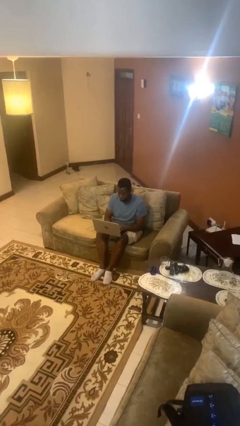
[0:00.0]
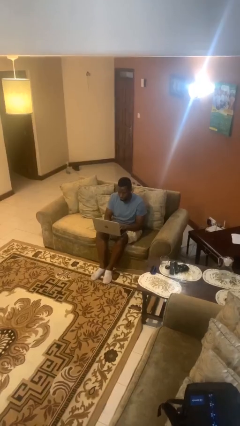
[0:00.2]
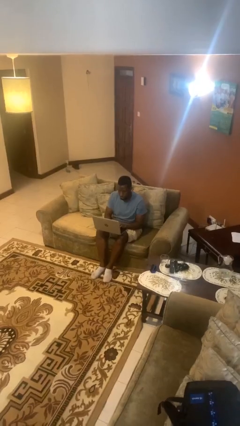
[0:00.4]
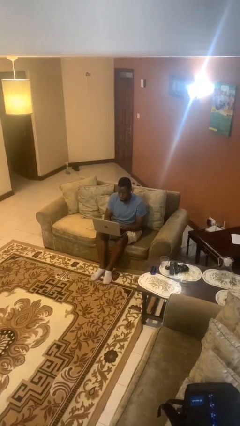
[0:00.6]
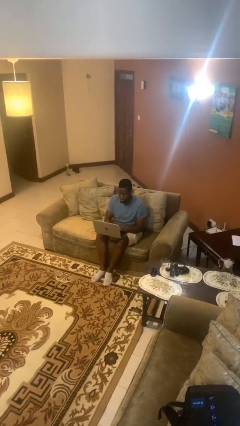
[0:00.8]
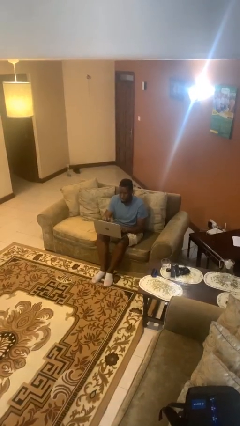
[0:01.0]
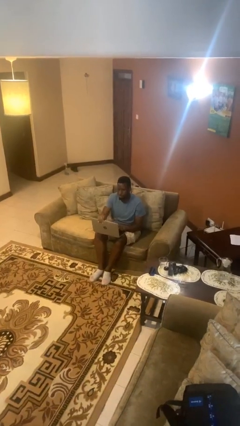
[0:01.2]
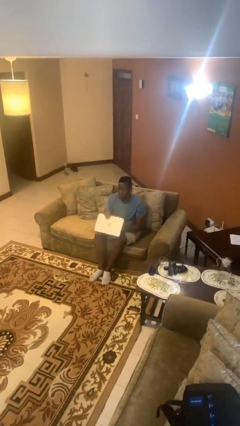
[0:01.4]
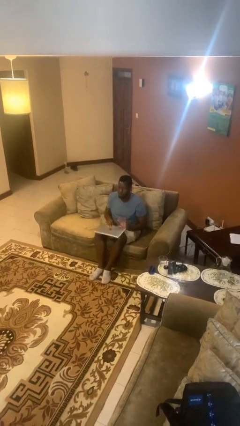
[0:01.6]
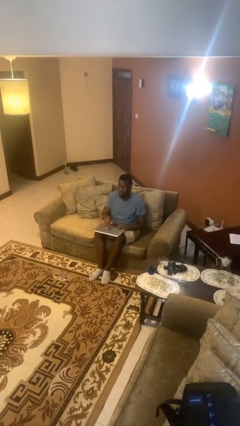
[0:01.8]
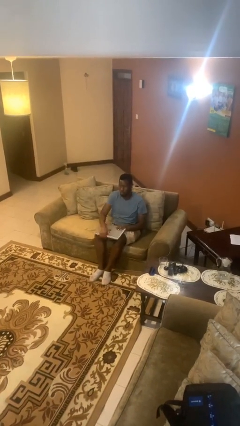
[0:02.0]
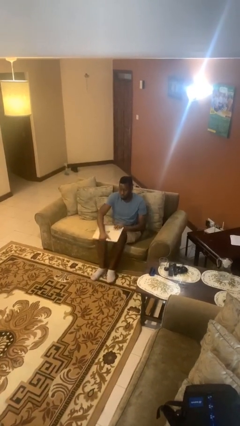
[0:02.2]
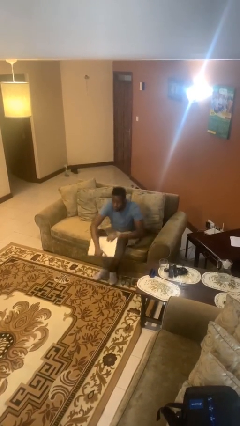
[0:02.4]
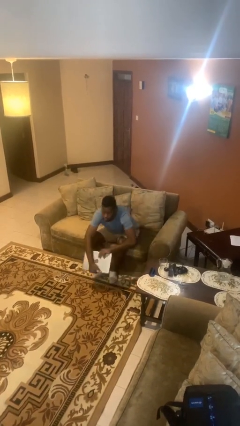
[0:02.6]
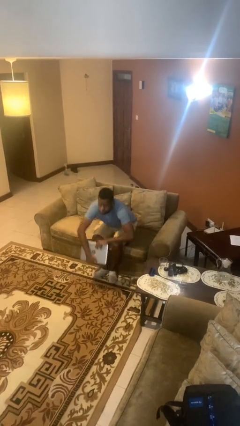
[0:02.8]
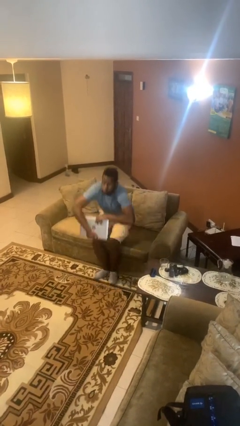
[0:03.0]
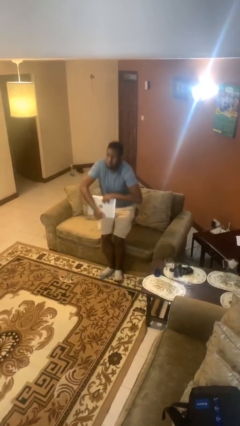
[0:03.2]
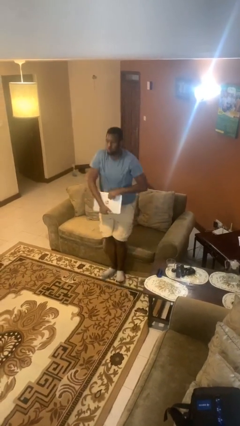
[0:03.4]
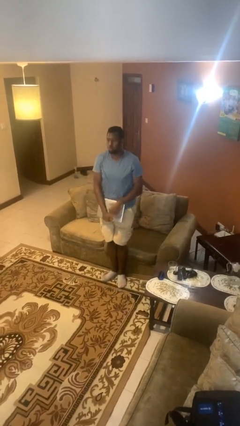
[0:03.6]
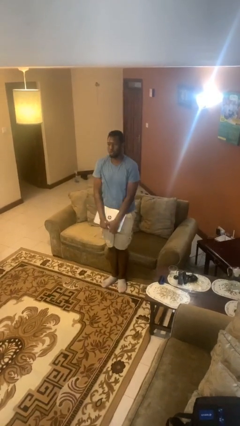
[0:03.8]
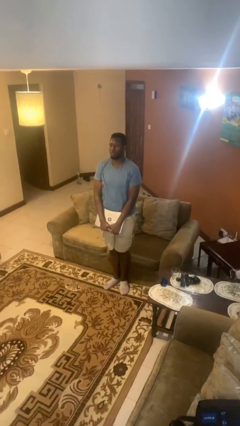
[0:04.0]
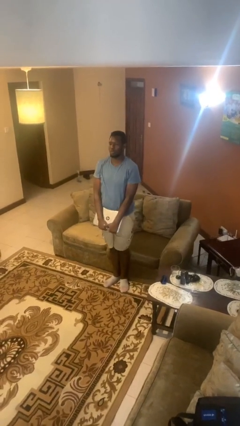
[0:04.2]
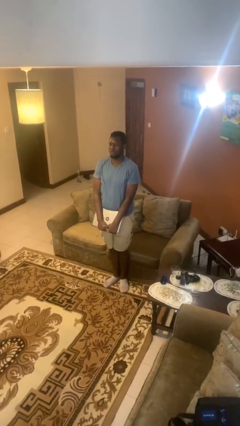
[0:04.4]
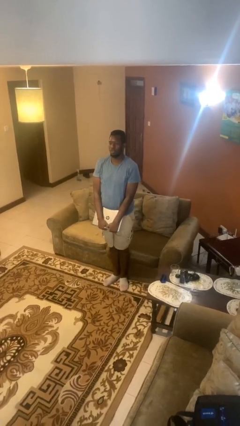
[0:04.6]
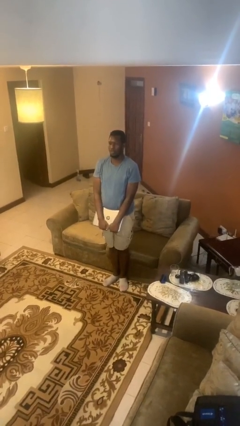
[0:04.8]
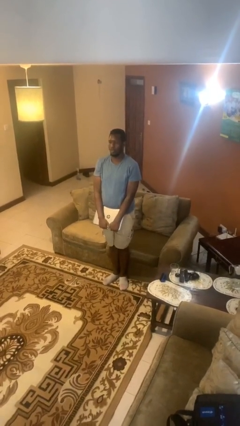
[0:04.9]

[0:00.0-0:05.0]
person stands up

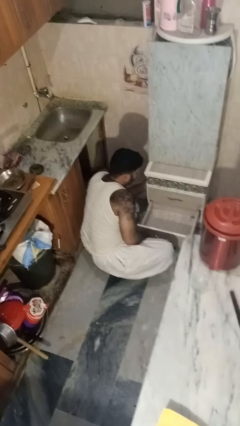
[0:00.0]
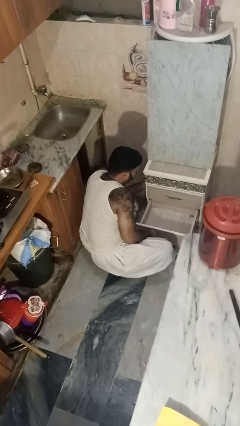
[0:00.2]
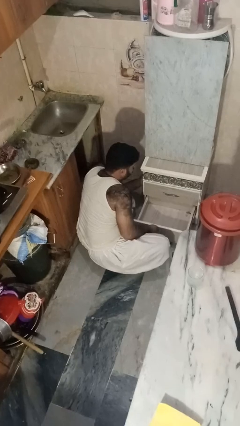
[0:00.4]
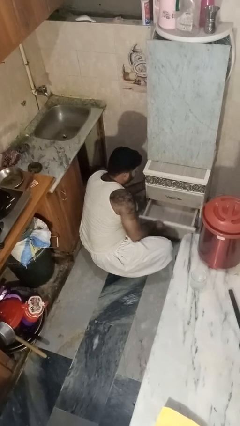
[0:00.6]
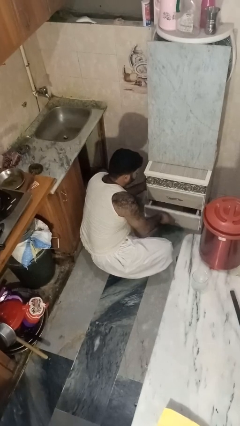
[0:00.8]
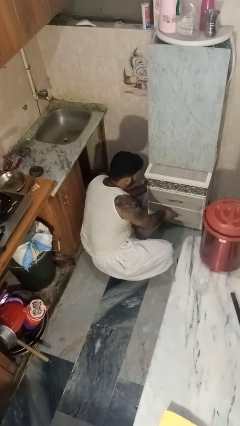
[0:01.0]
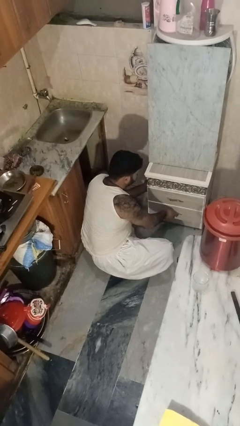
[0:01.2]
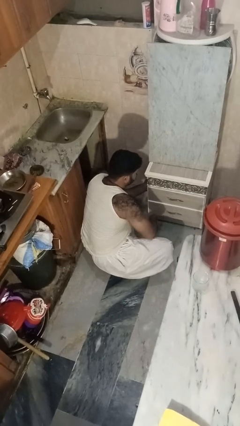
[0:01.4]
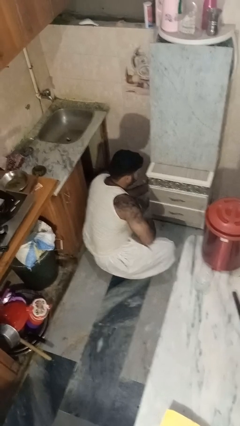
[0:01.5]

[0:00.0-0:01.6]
person closes kitchen drawer

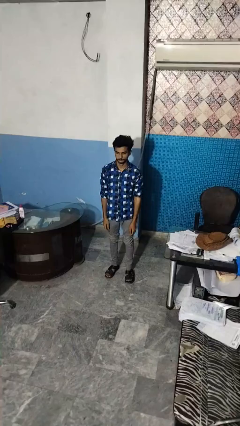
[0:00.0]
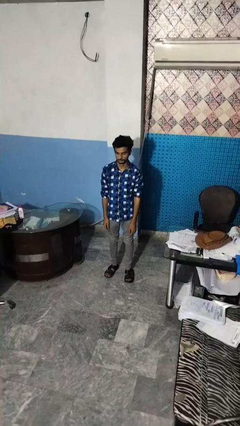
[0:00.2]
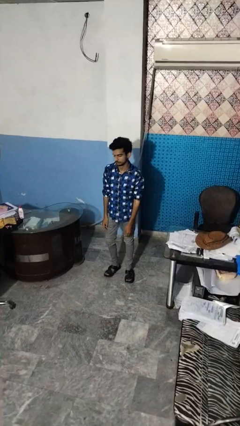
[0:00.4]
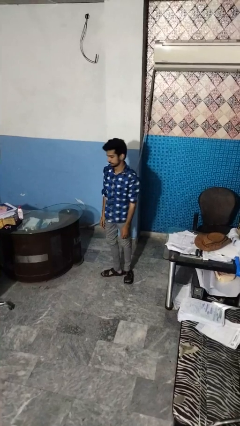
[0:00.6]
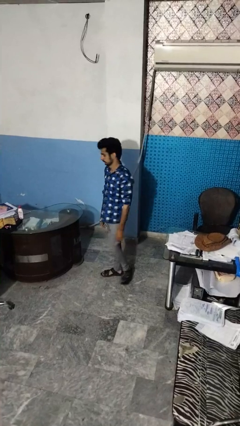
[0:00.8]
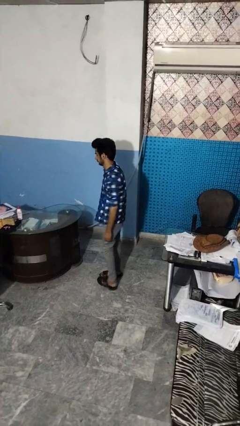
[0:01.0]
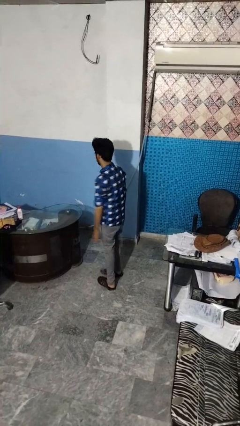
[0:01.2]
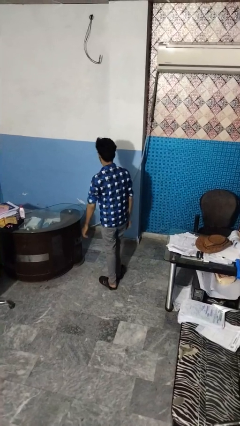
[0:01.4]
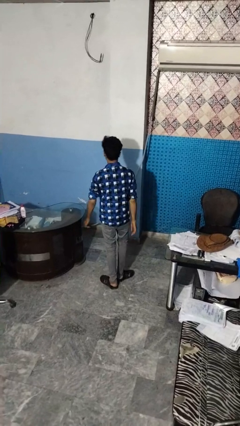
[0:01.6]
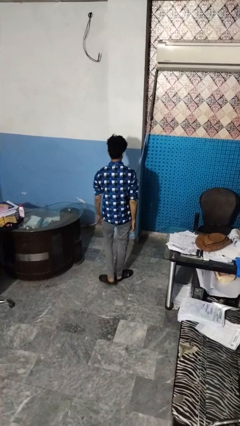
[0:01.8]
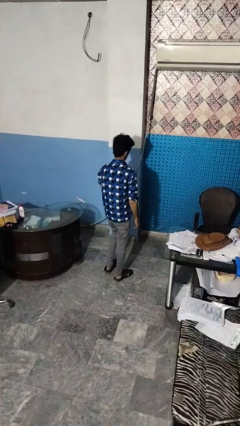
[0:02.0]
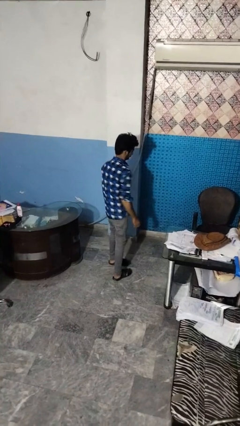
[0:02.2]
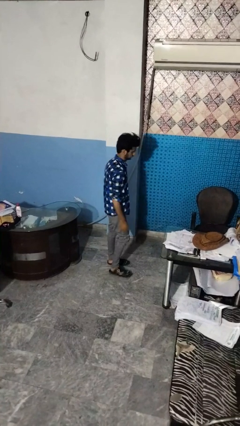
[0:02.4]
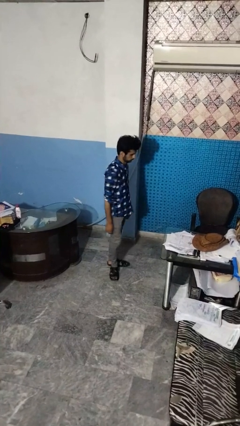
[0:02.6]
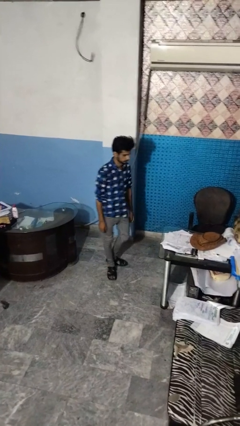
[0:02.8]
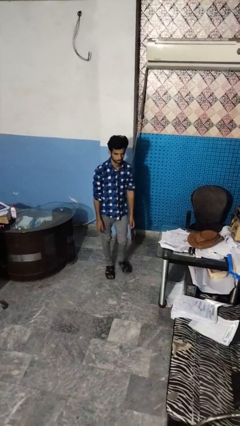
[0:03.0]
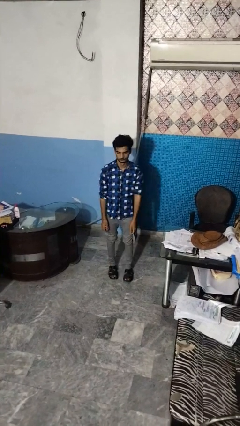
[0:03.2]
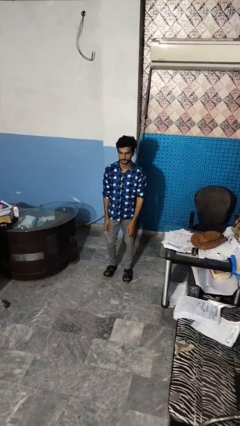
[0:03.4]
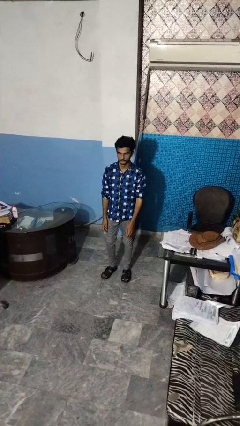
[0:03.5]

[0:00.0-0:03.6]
person twirls

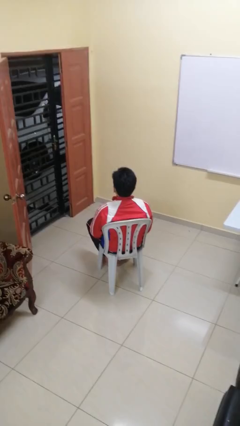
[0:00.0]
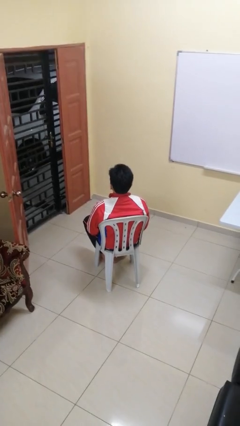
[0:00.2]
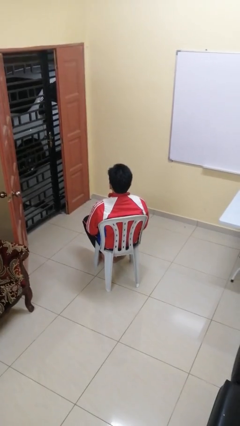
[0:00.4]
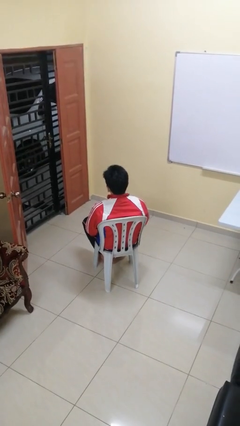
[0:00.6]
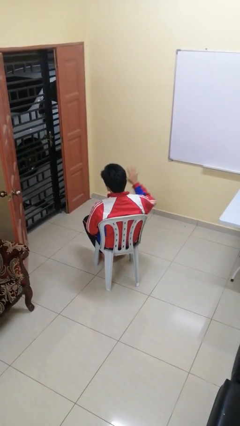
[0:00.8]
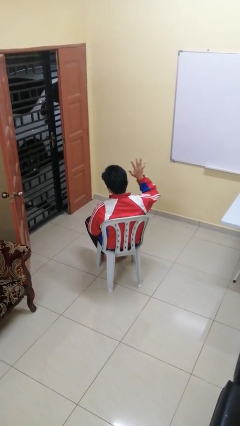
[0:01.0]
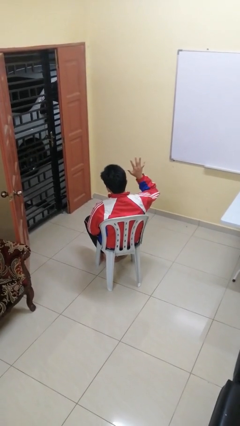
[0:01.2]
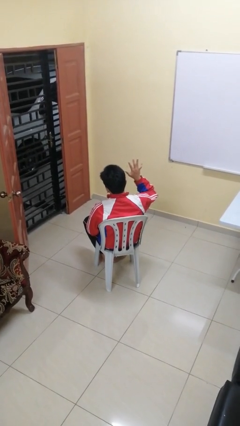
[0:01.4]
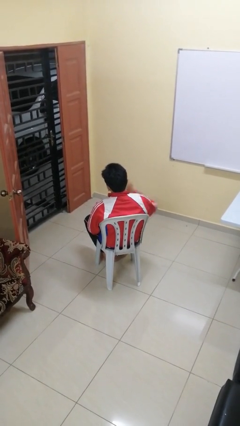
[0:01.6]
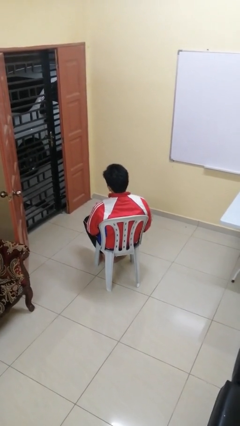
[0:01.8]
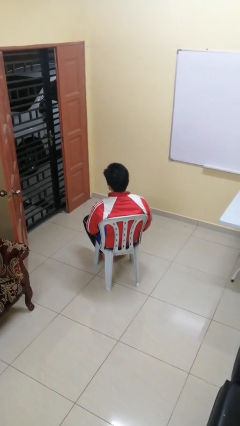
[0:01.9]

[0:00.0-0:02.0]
person gestures number five

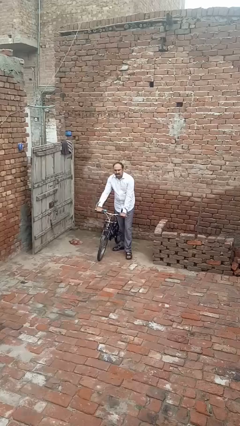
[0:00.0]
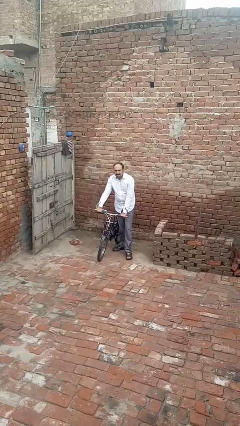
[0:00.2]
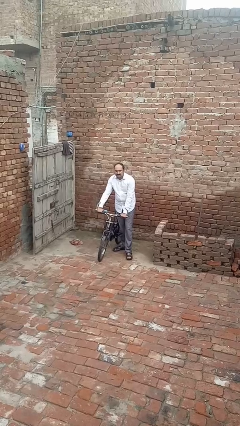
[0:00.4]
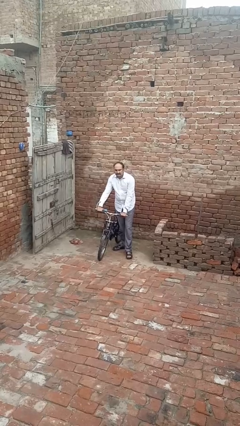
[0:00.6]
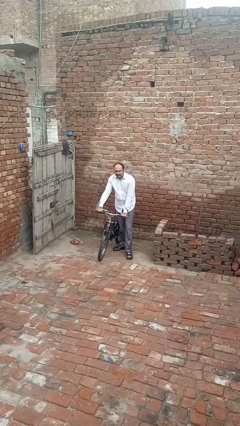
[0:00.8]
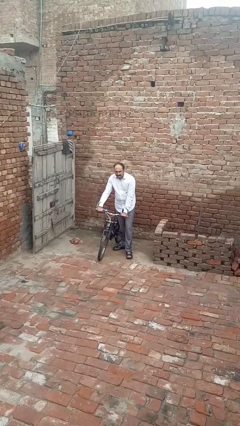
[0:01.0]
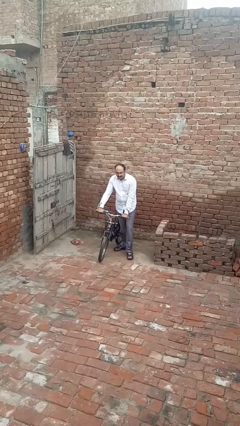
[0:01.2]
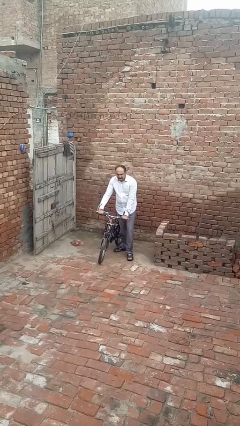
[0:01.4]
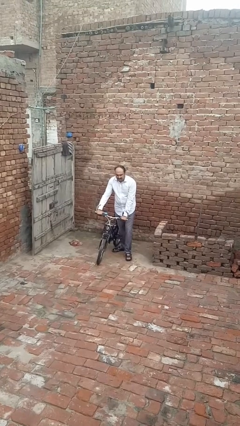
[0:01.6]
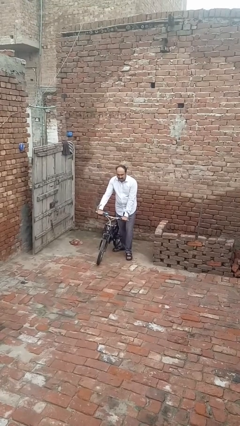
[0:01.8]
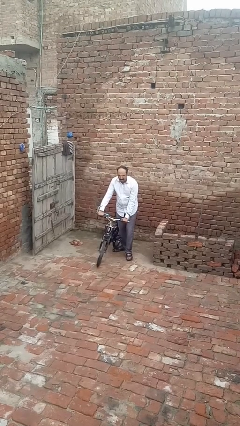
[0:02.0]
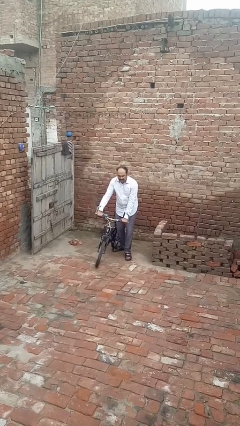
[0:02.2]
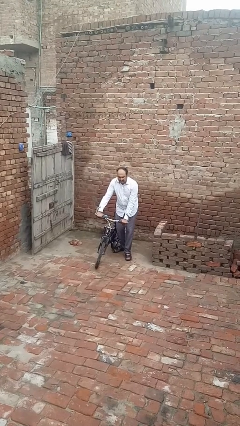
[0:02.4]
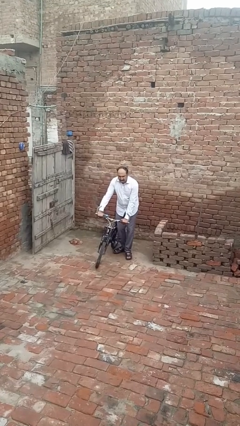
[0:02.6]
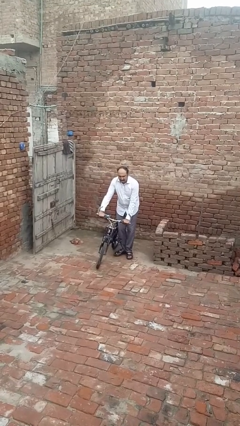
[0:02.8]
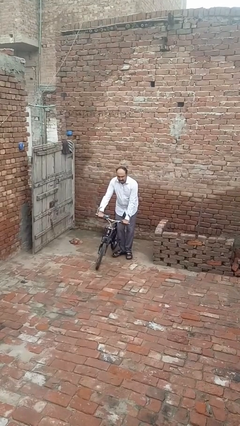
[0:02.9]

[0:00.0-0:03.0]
person carries bicycle

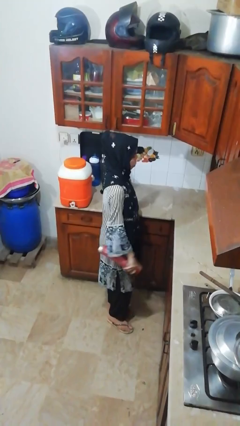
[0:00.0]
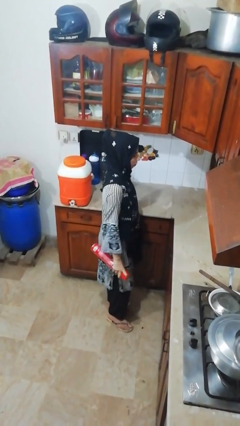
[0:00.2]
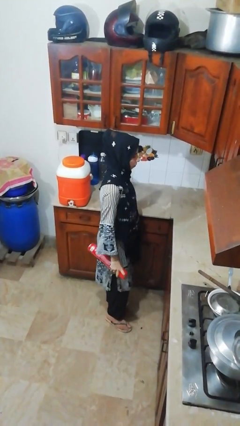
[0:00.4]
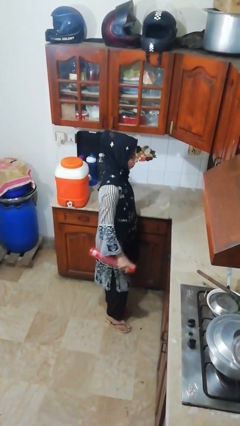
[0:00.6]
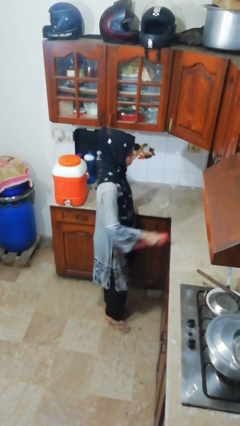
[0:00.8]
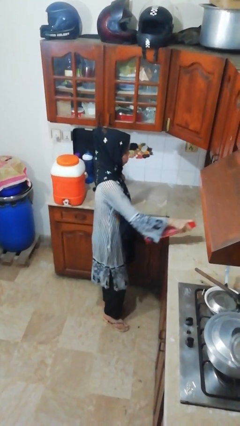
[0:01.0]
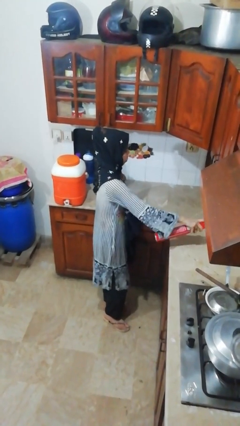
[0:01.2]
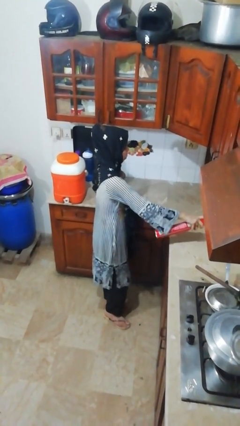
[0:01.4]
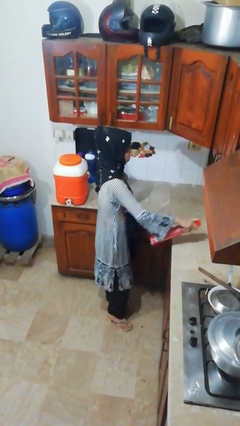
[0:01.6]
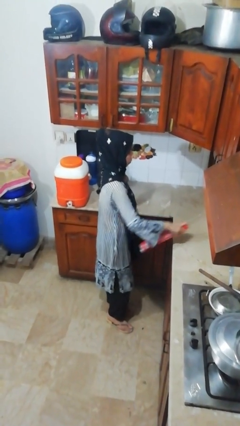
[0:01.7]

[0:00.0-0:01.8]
person sprays from bottle

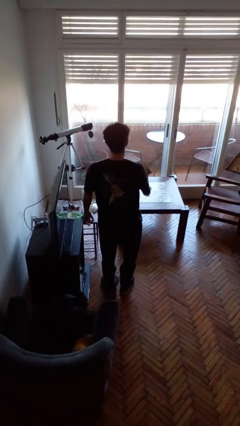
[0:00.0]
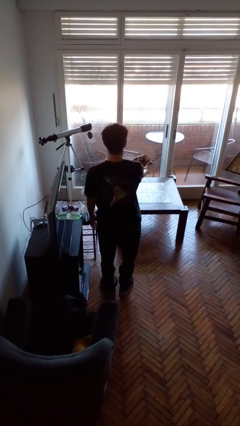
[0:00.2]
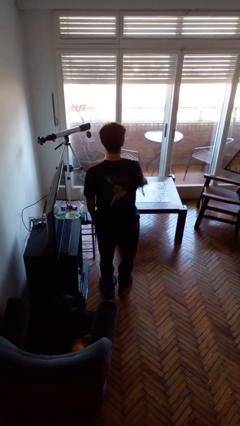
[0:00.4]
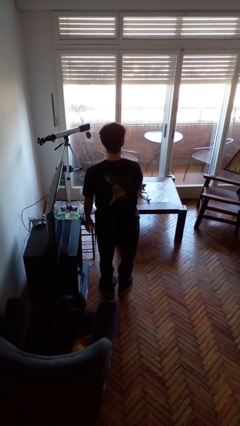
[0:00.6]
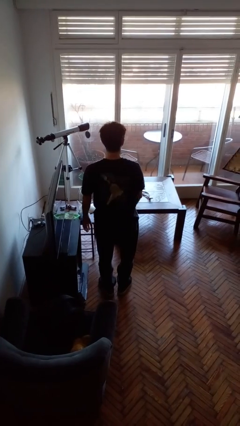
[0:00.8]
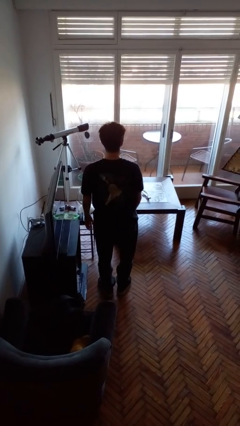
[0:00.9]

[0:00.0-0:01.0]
person throws object on table
